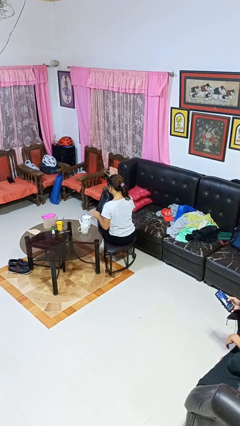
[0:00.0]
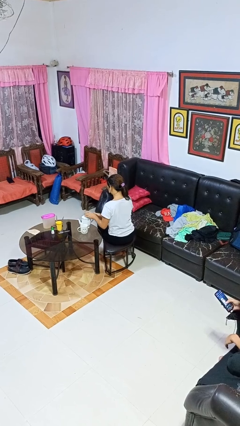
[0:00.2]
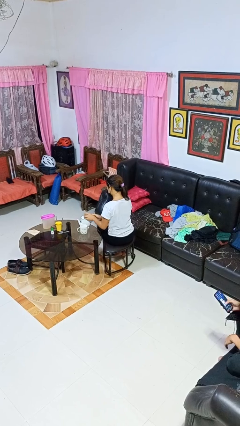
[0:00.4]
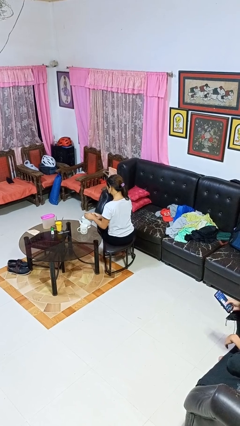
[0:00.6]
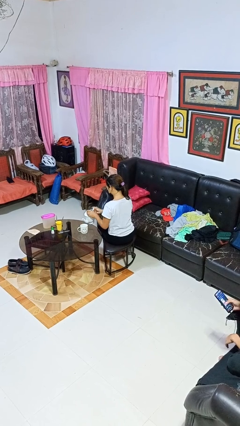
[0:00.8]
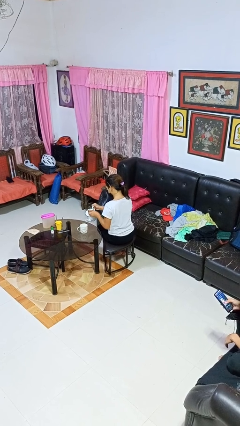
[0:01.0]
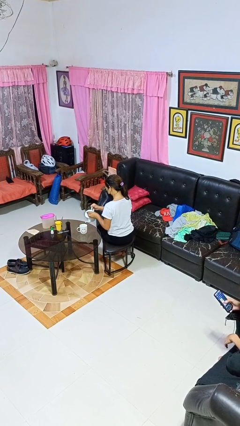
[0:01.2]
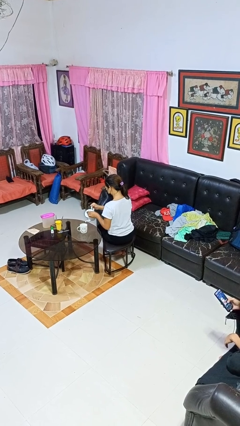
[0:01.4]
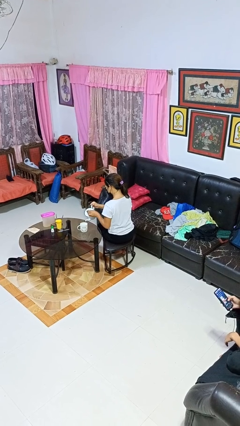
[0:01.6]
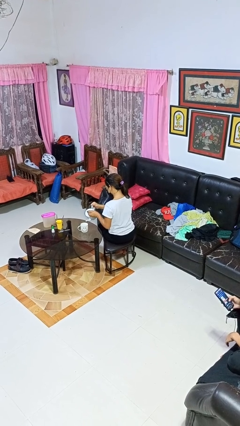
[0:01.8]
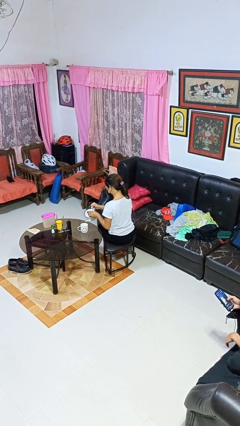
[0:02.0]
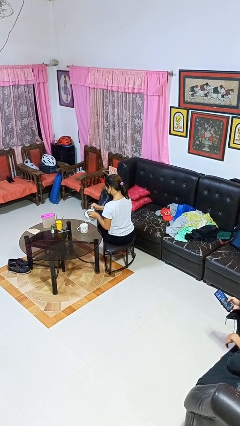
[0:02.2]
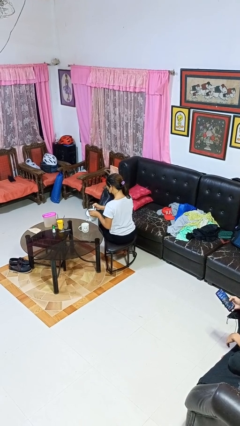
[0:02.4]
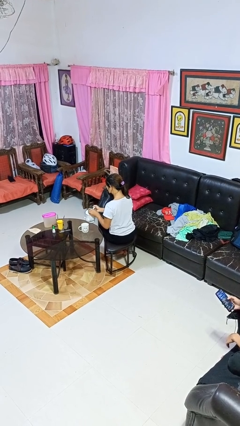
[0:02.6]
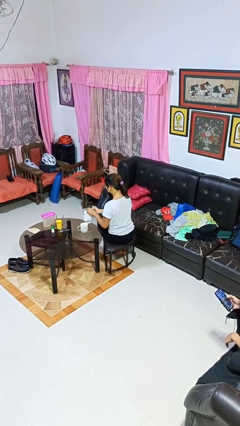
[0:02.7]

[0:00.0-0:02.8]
person pours coffee into mug

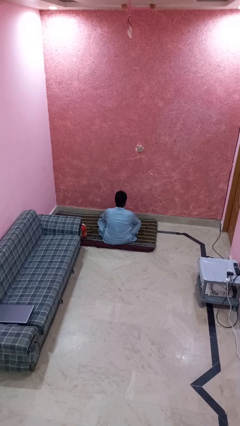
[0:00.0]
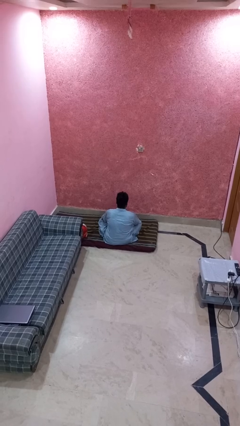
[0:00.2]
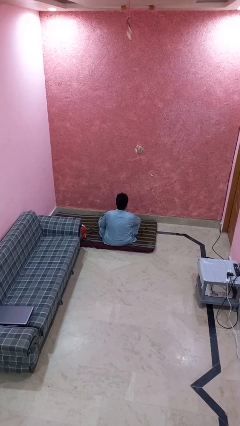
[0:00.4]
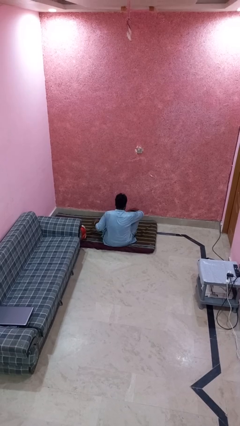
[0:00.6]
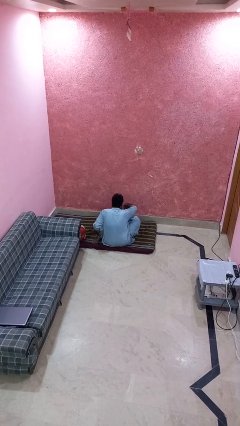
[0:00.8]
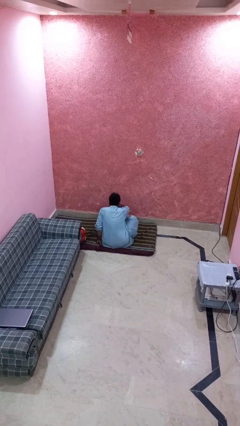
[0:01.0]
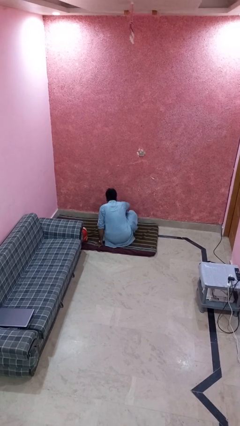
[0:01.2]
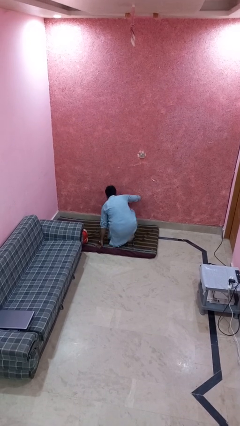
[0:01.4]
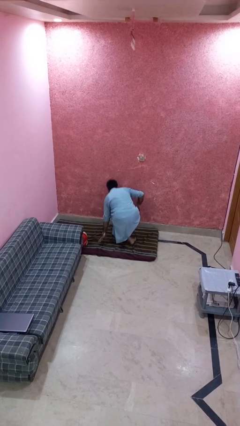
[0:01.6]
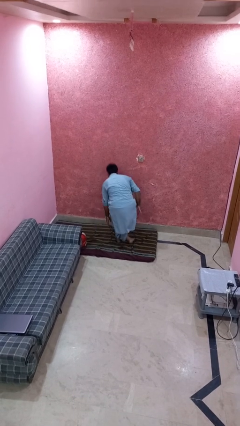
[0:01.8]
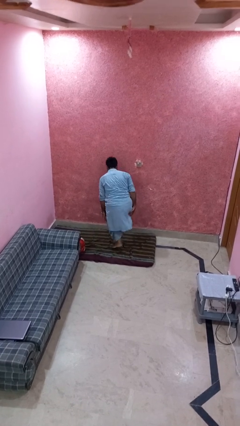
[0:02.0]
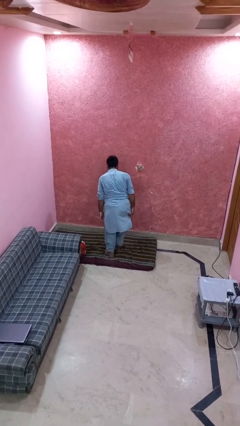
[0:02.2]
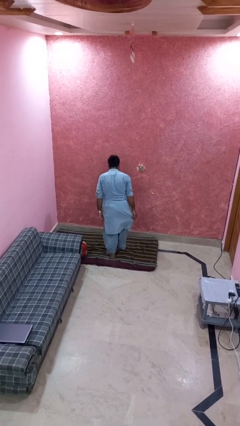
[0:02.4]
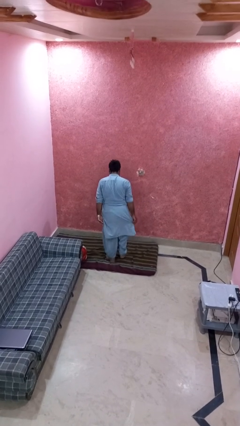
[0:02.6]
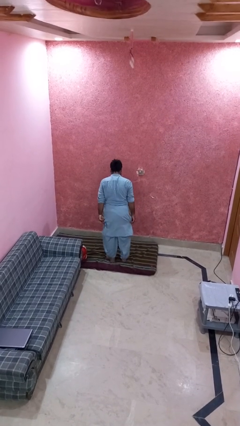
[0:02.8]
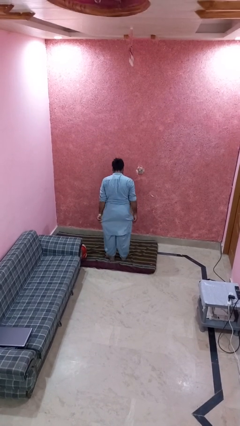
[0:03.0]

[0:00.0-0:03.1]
person stands up from floor

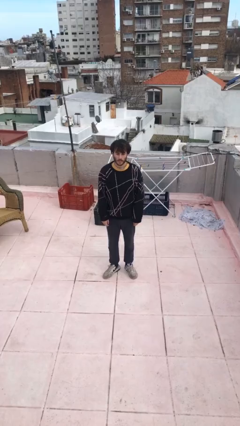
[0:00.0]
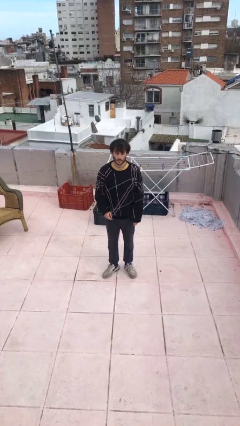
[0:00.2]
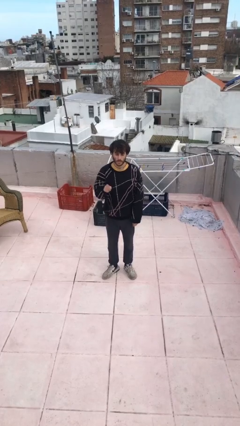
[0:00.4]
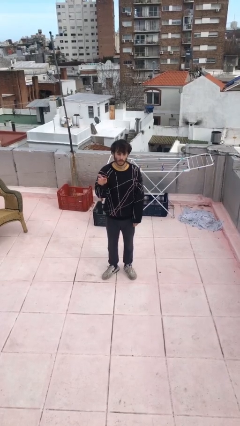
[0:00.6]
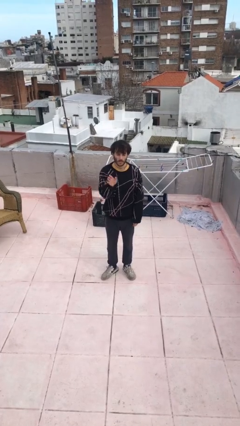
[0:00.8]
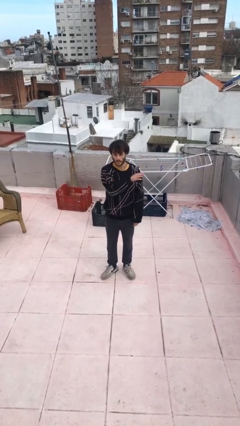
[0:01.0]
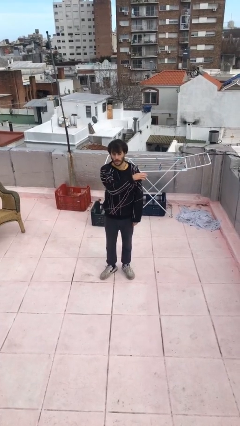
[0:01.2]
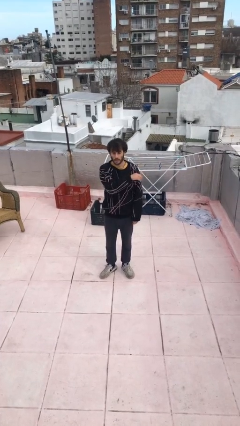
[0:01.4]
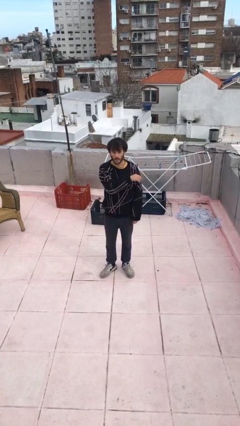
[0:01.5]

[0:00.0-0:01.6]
person gestures swipe left

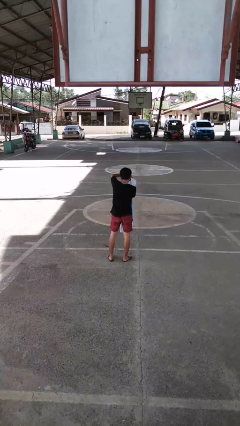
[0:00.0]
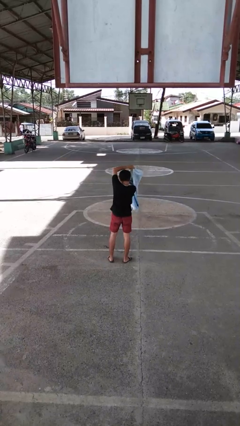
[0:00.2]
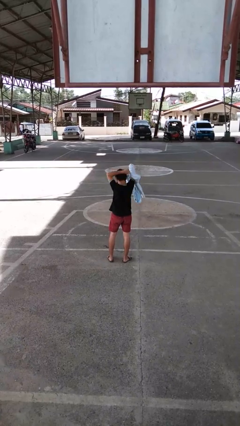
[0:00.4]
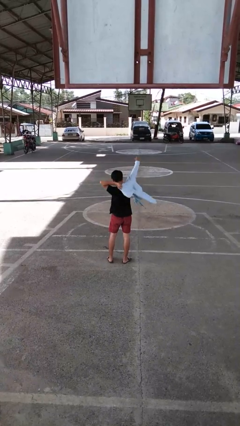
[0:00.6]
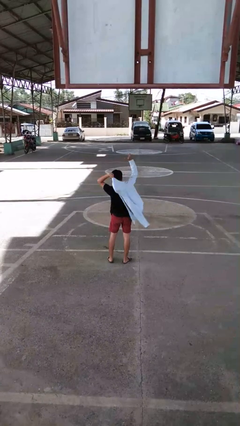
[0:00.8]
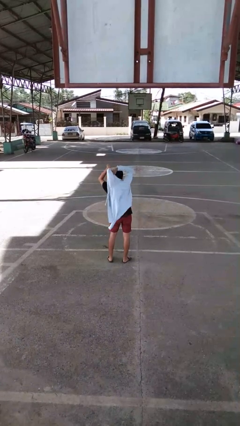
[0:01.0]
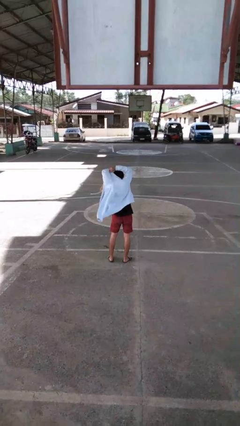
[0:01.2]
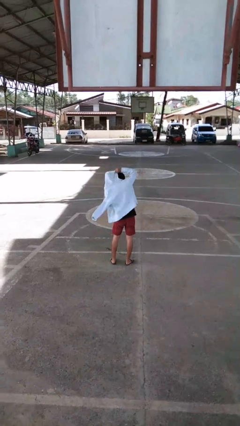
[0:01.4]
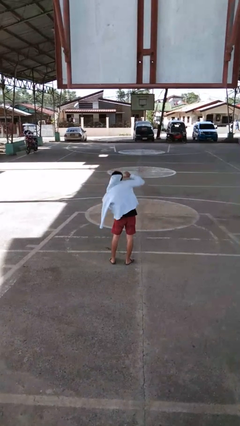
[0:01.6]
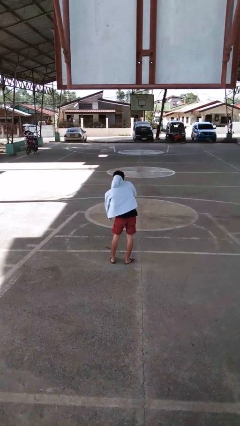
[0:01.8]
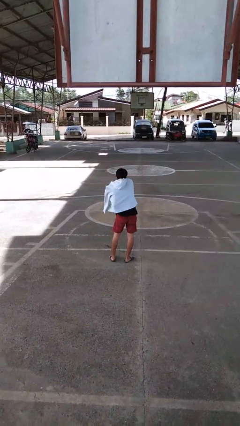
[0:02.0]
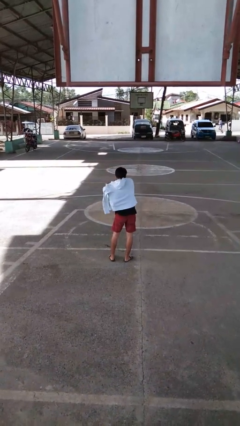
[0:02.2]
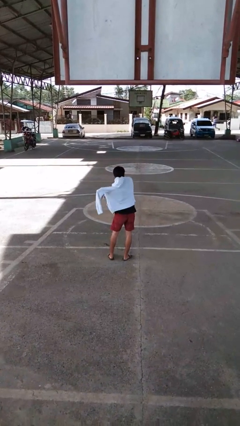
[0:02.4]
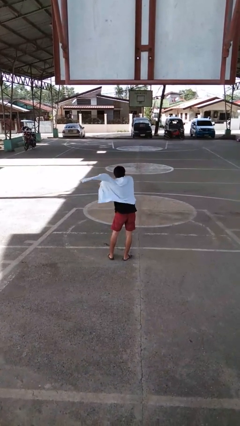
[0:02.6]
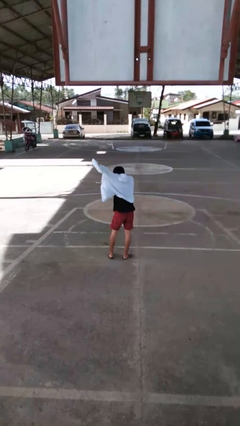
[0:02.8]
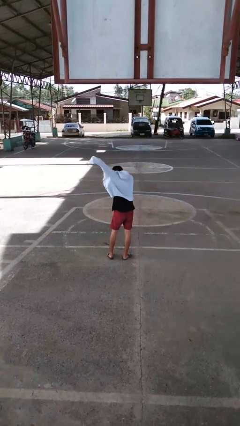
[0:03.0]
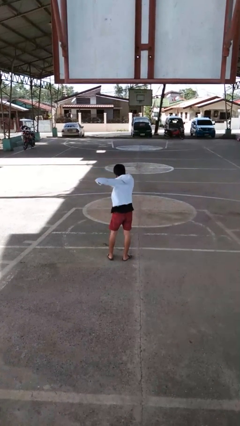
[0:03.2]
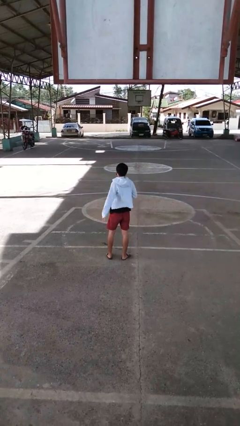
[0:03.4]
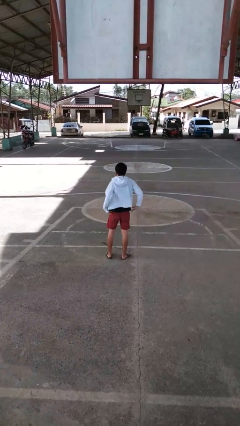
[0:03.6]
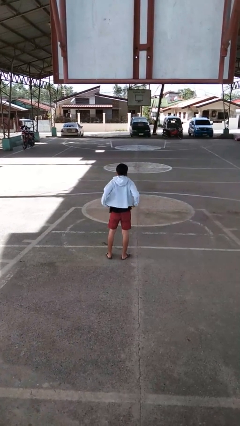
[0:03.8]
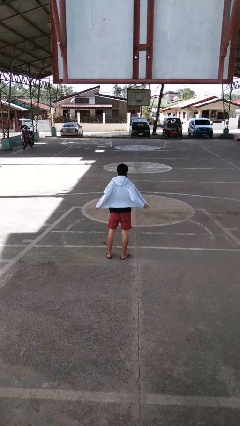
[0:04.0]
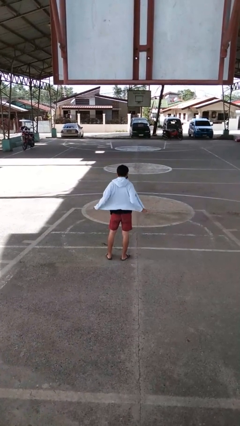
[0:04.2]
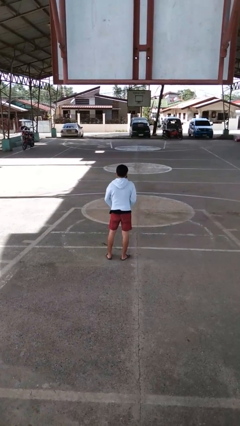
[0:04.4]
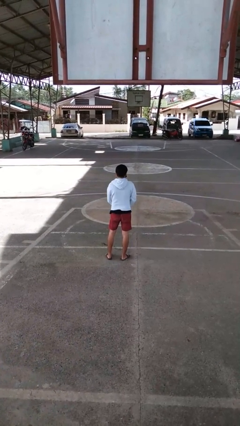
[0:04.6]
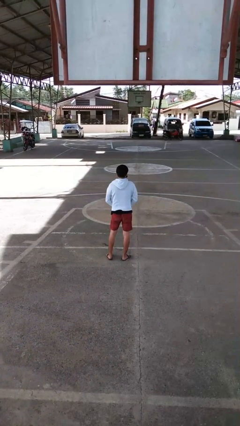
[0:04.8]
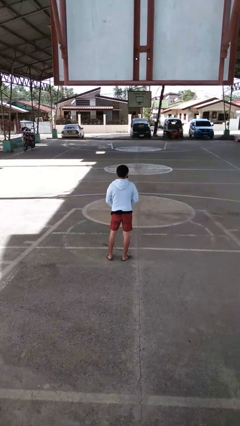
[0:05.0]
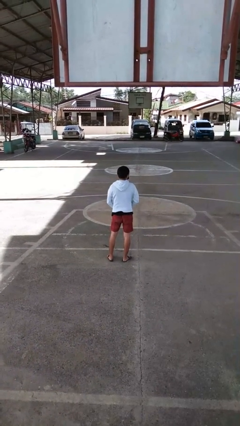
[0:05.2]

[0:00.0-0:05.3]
person puts on jacket

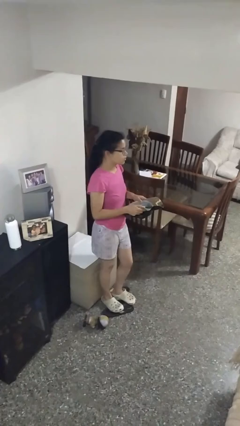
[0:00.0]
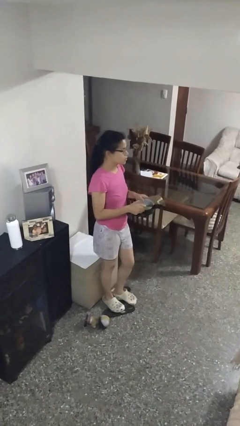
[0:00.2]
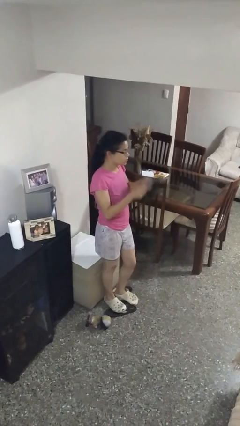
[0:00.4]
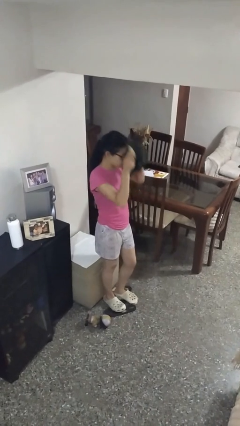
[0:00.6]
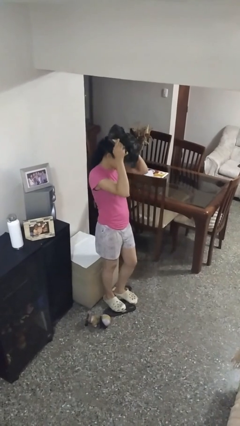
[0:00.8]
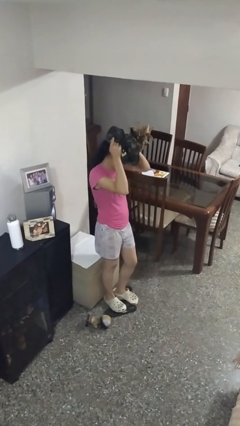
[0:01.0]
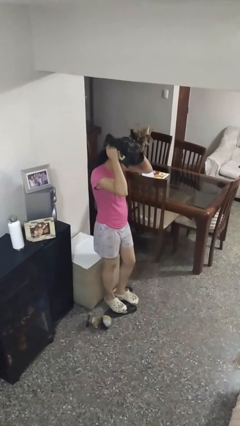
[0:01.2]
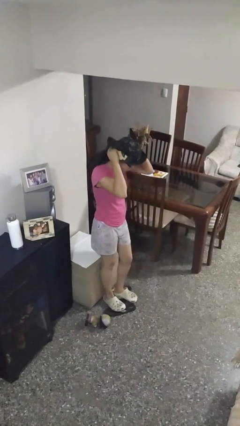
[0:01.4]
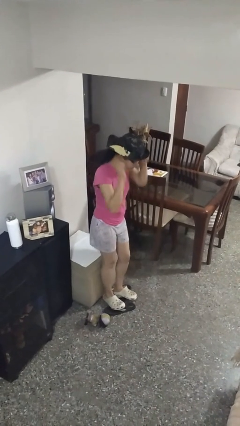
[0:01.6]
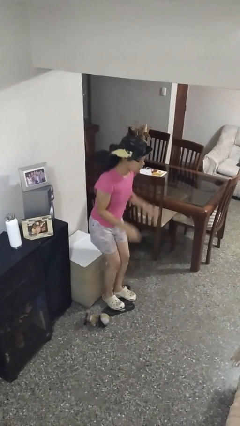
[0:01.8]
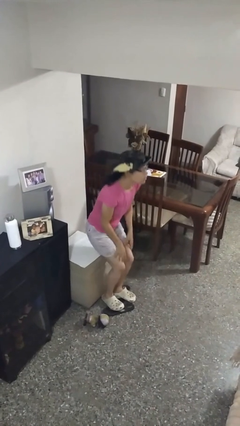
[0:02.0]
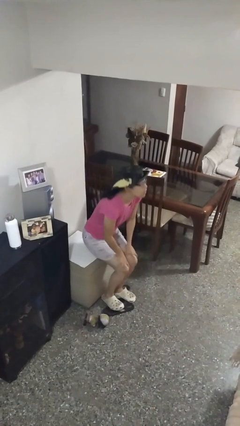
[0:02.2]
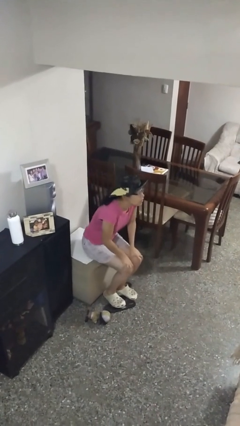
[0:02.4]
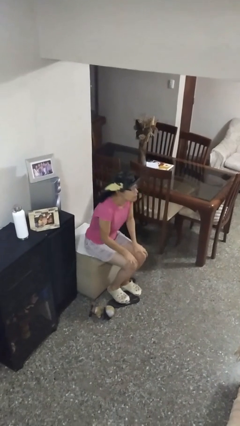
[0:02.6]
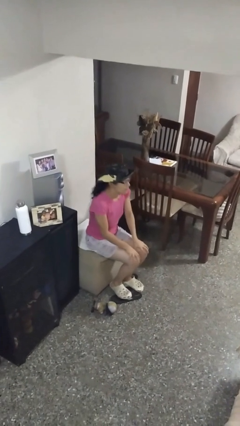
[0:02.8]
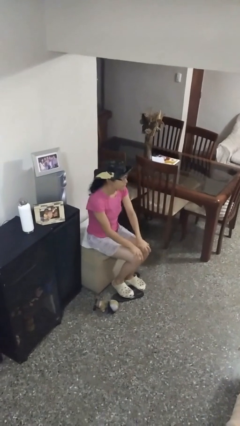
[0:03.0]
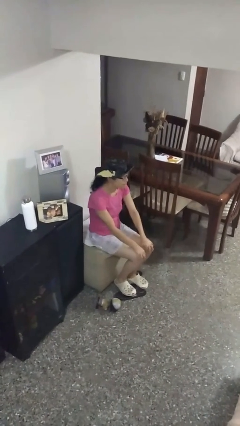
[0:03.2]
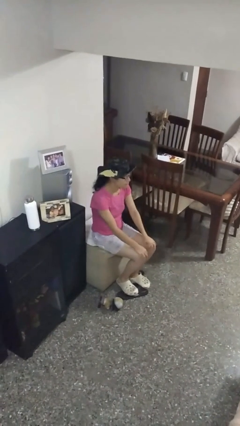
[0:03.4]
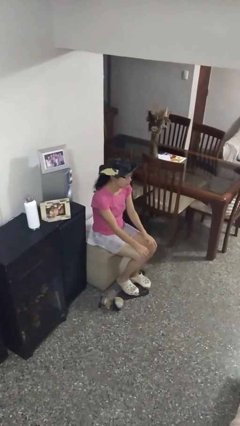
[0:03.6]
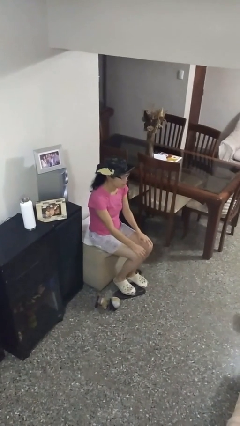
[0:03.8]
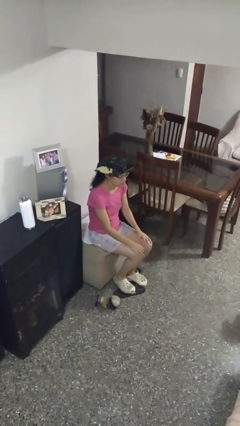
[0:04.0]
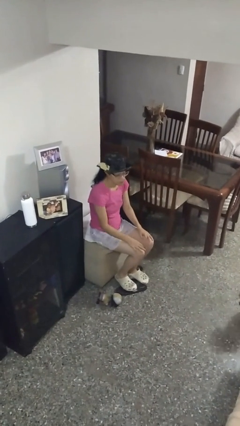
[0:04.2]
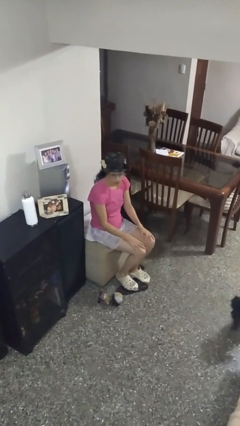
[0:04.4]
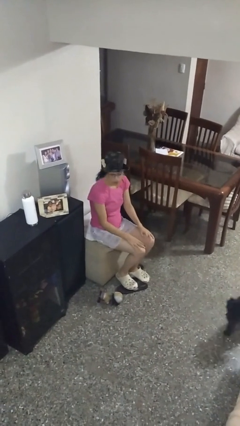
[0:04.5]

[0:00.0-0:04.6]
person puts on hat
